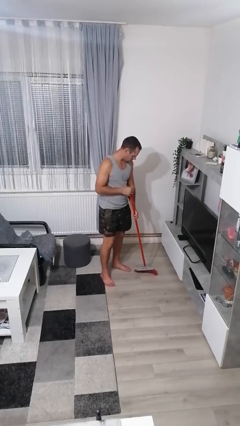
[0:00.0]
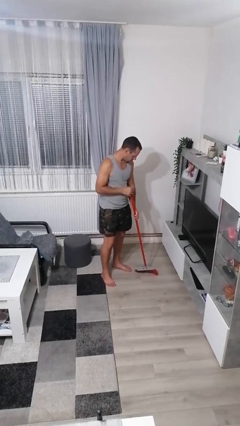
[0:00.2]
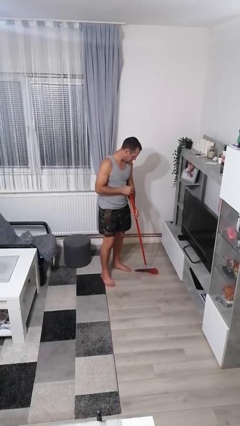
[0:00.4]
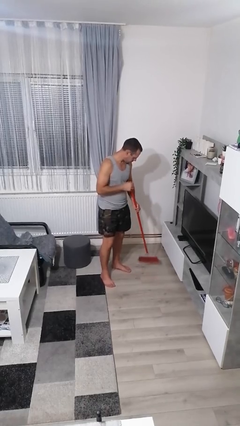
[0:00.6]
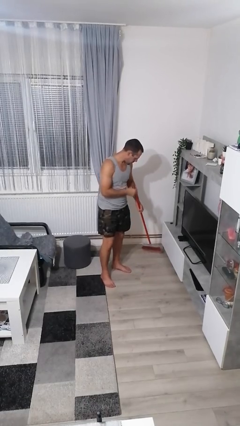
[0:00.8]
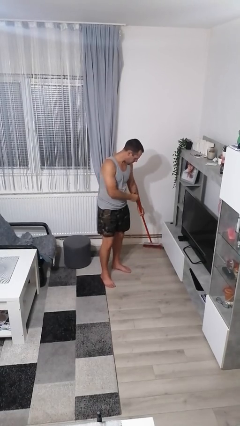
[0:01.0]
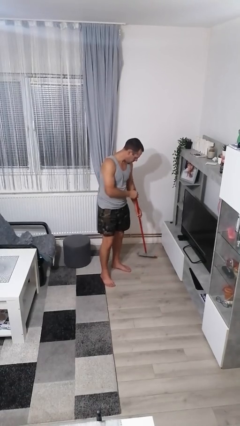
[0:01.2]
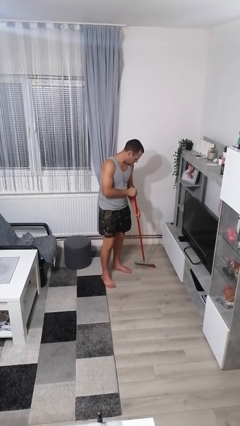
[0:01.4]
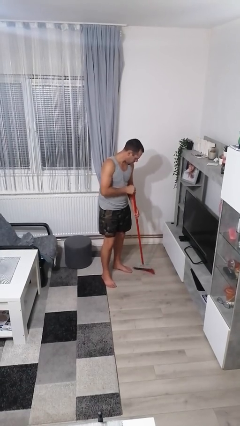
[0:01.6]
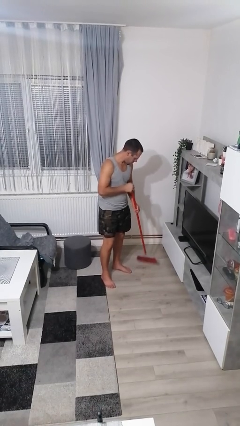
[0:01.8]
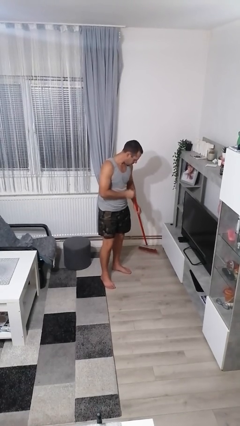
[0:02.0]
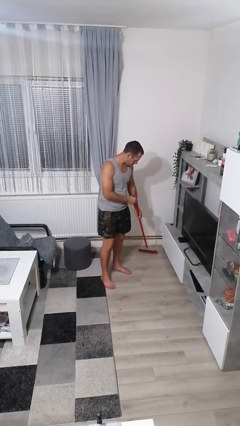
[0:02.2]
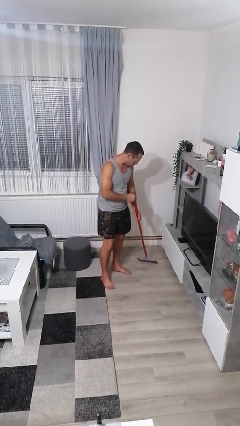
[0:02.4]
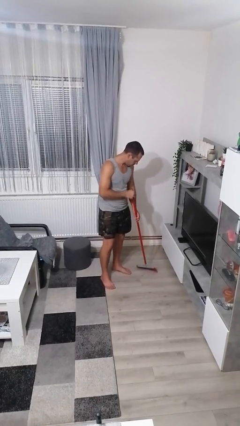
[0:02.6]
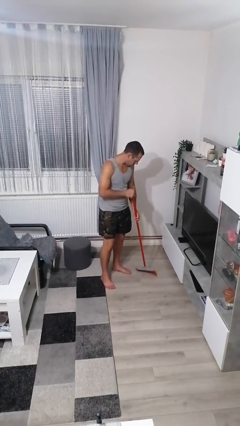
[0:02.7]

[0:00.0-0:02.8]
person sweeps floor

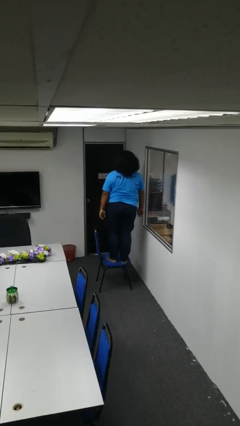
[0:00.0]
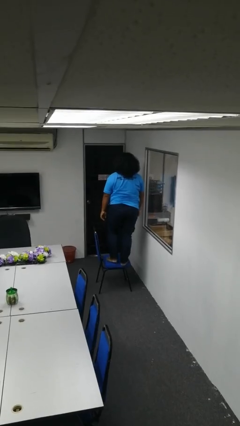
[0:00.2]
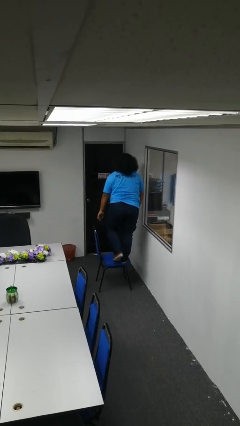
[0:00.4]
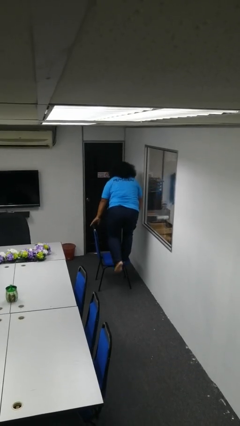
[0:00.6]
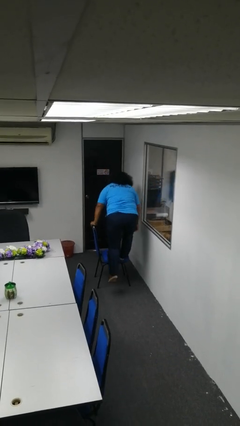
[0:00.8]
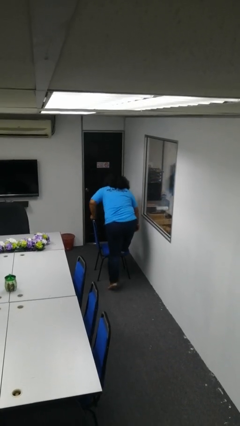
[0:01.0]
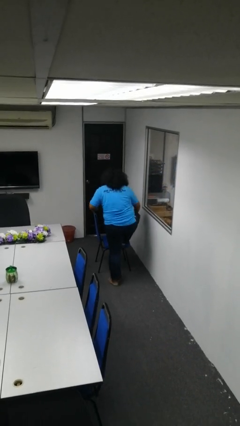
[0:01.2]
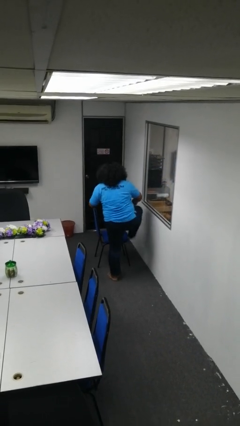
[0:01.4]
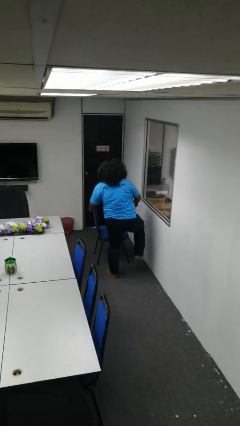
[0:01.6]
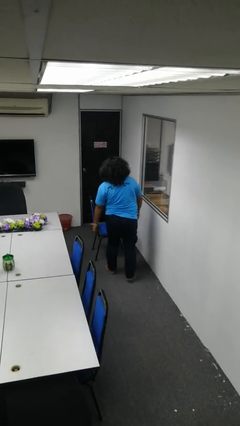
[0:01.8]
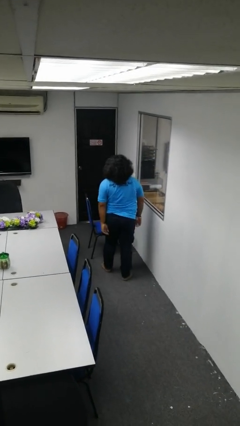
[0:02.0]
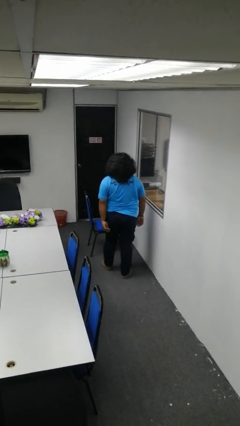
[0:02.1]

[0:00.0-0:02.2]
person climbs off chair

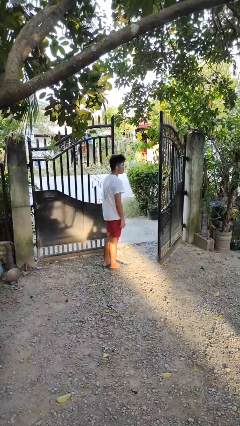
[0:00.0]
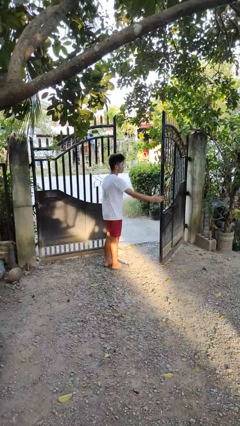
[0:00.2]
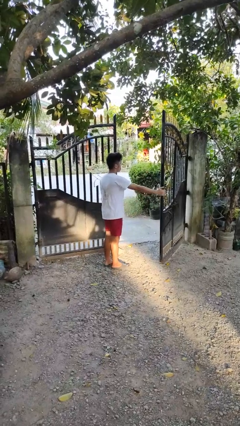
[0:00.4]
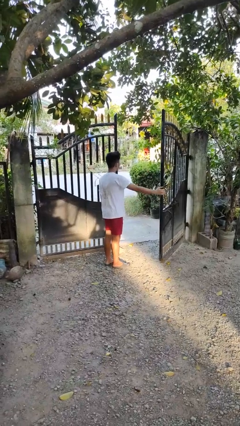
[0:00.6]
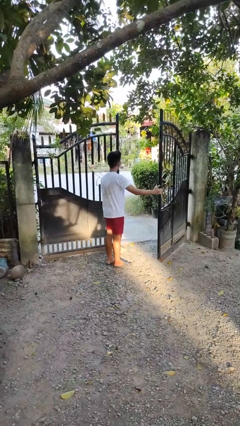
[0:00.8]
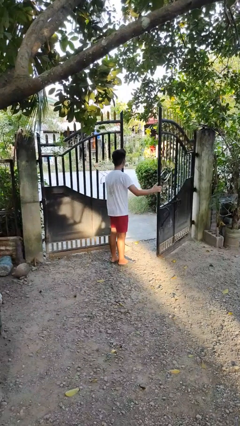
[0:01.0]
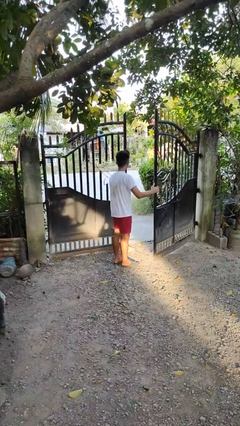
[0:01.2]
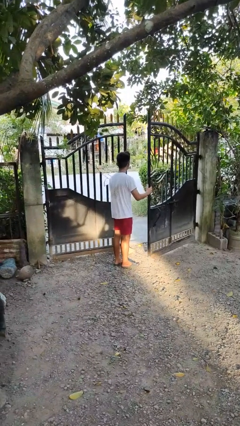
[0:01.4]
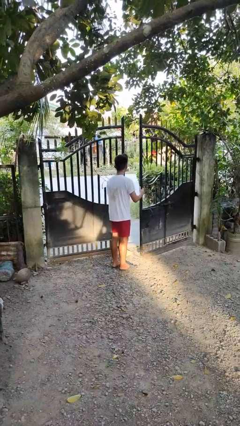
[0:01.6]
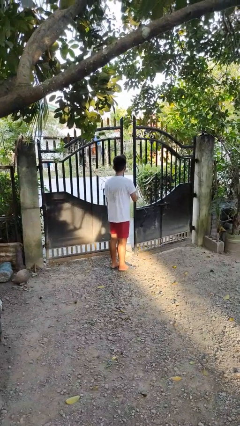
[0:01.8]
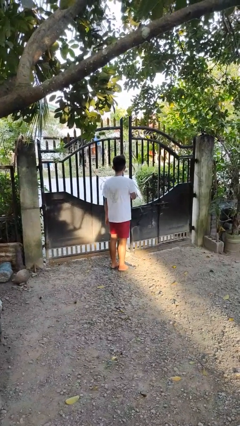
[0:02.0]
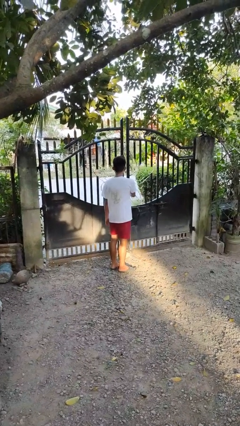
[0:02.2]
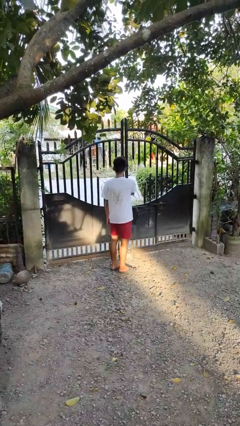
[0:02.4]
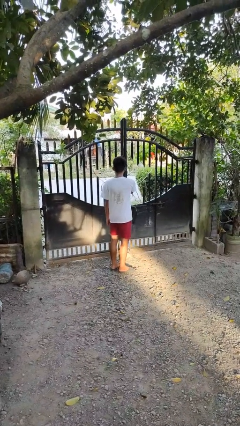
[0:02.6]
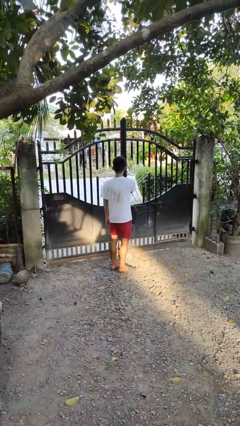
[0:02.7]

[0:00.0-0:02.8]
person closes gate

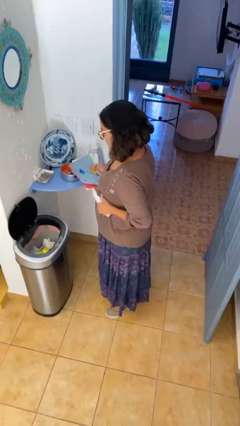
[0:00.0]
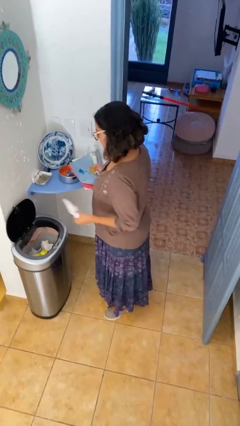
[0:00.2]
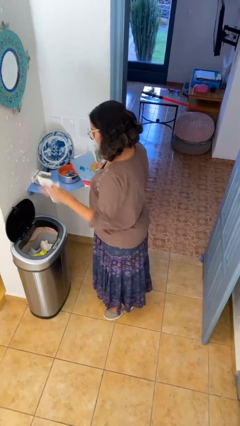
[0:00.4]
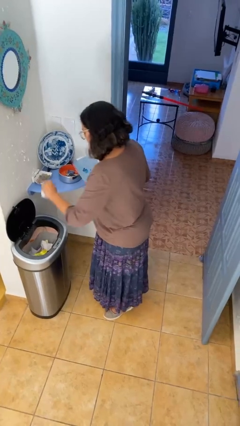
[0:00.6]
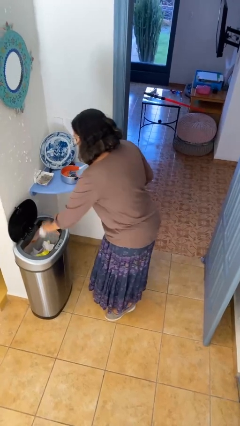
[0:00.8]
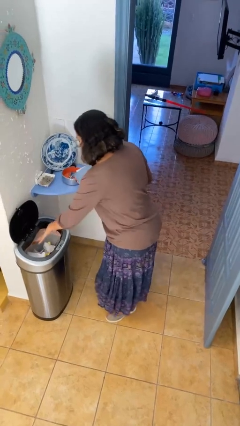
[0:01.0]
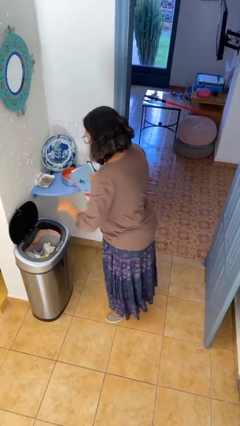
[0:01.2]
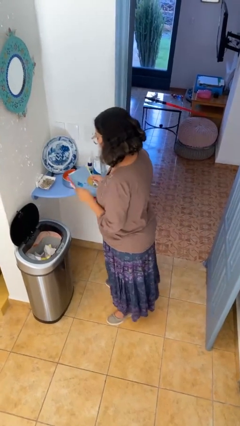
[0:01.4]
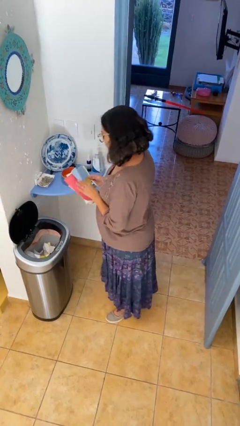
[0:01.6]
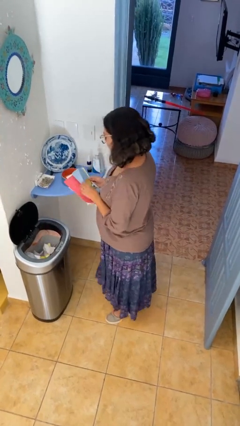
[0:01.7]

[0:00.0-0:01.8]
person discards trash

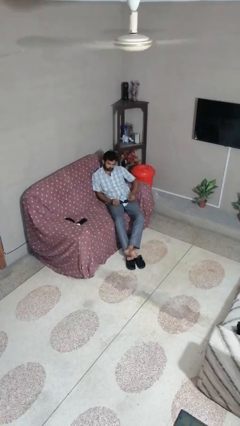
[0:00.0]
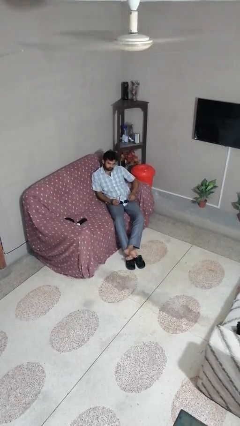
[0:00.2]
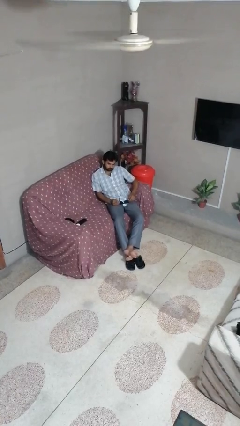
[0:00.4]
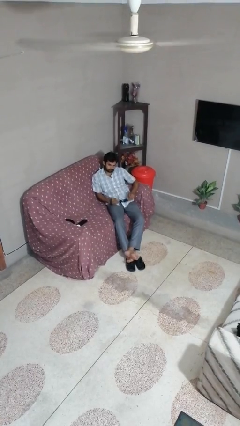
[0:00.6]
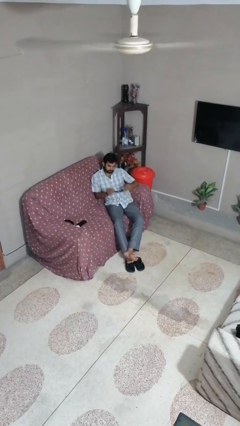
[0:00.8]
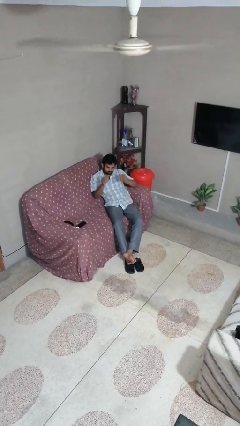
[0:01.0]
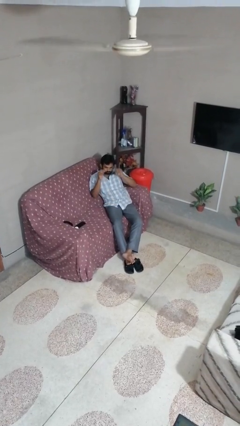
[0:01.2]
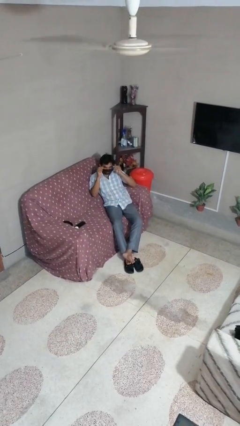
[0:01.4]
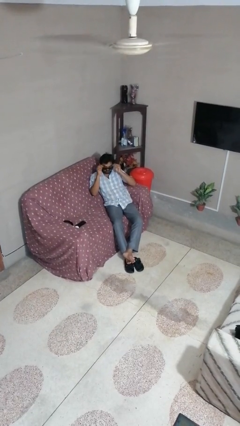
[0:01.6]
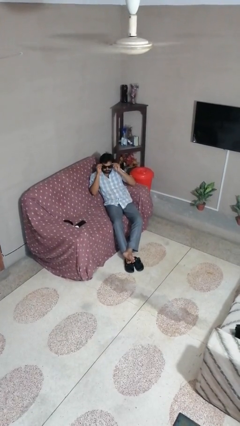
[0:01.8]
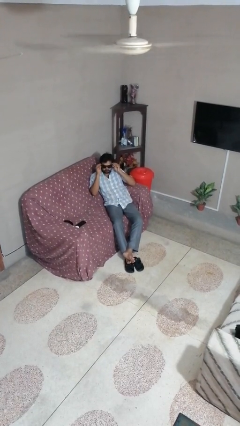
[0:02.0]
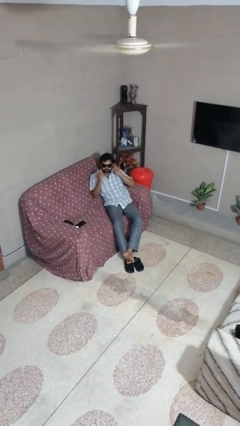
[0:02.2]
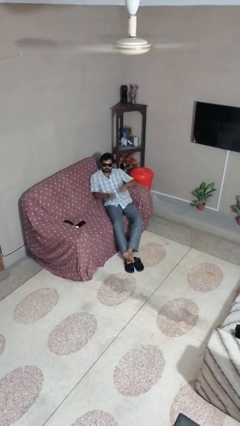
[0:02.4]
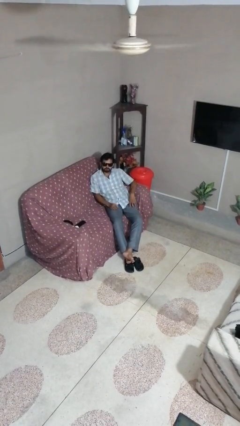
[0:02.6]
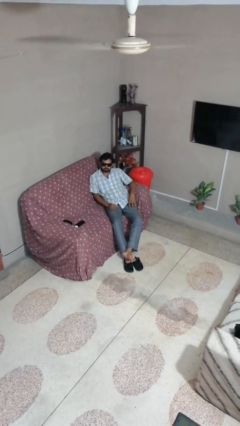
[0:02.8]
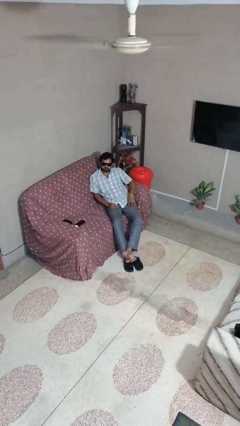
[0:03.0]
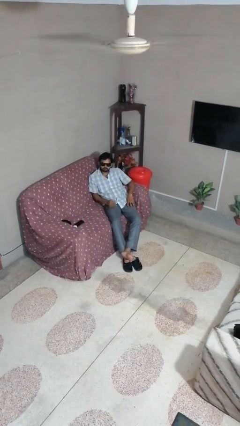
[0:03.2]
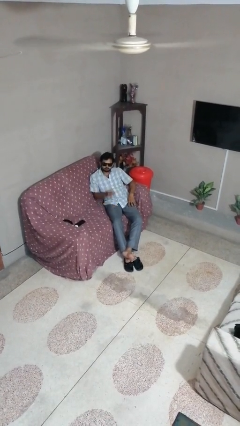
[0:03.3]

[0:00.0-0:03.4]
person puts on sunglasses

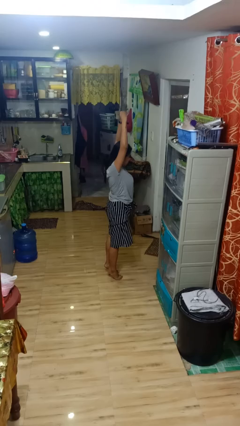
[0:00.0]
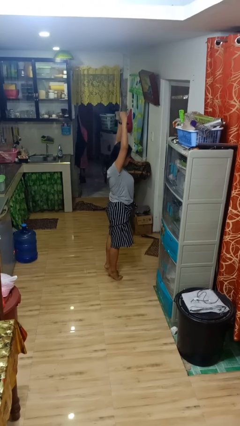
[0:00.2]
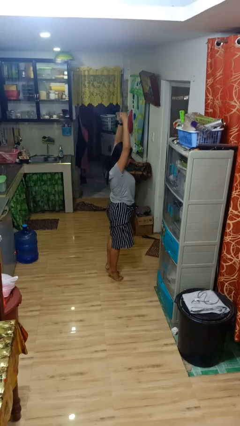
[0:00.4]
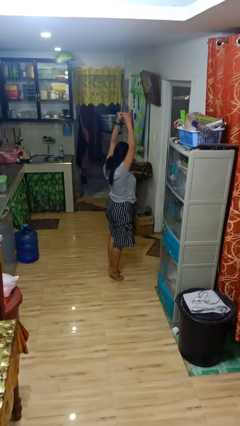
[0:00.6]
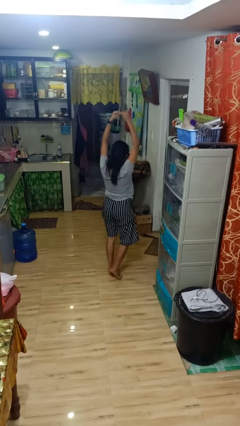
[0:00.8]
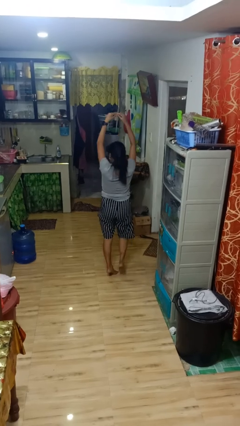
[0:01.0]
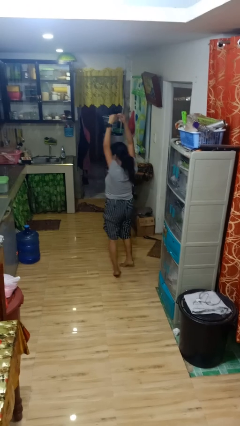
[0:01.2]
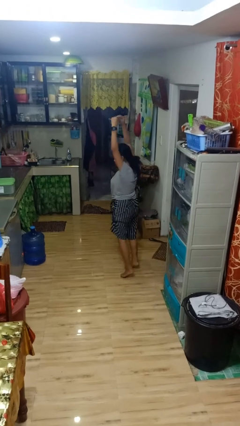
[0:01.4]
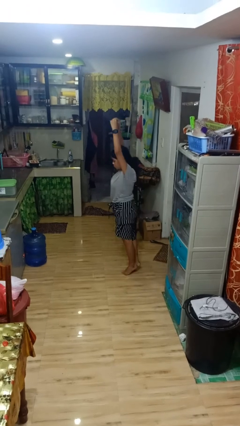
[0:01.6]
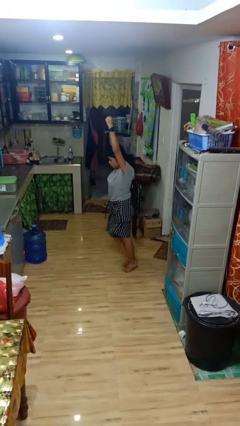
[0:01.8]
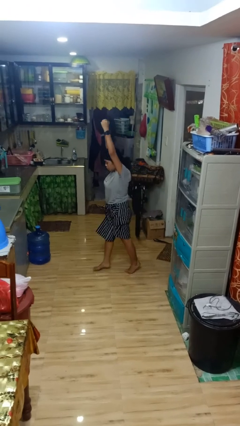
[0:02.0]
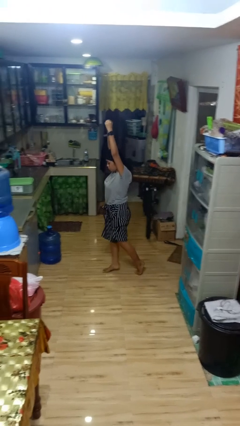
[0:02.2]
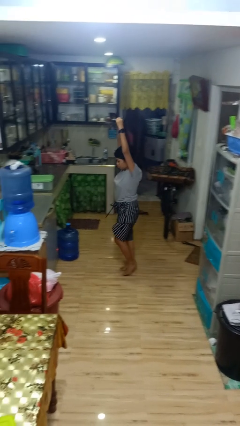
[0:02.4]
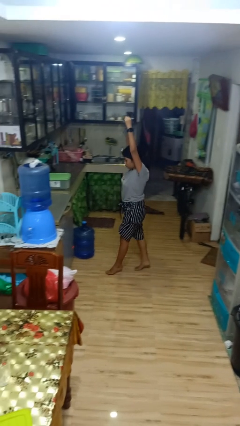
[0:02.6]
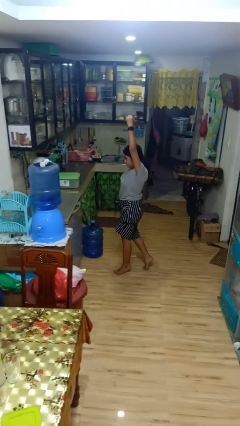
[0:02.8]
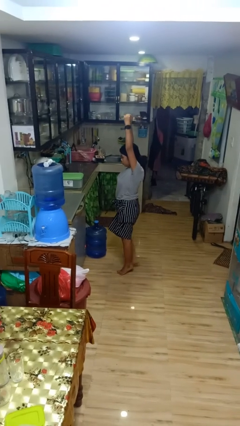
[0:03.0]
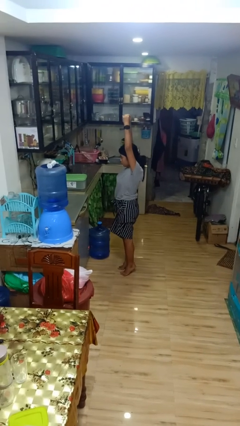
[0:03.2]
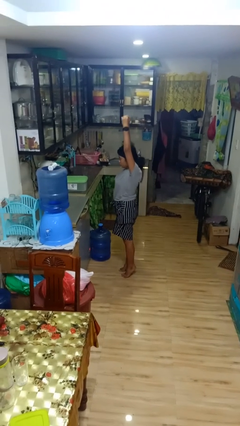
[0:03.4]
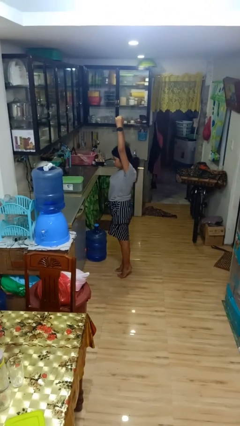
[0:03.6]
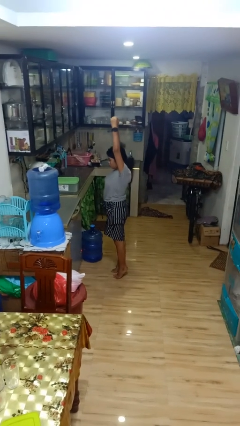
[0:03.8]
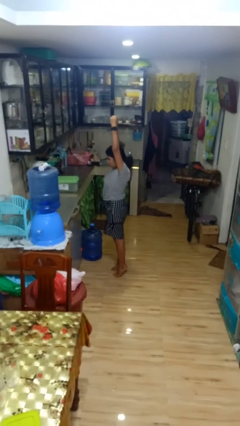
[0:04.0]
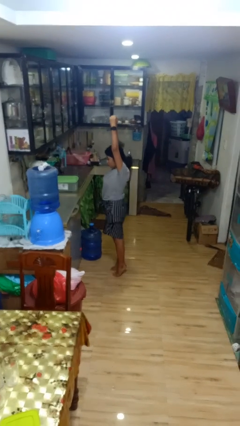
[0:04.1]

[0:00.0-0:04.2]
person walks tiptoe
